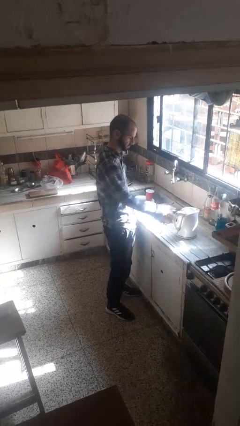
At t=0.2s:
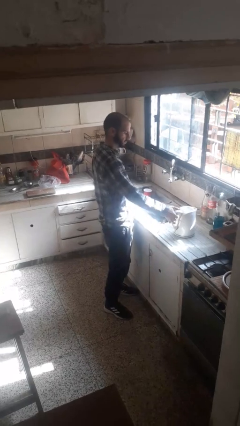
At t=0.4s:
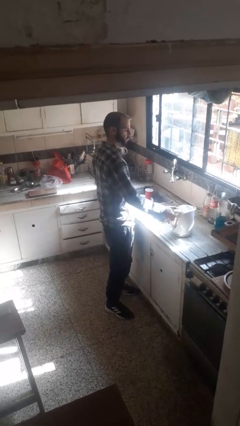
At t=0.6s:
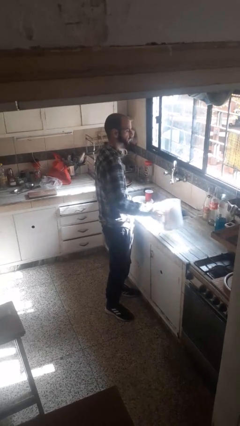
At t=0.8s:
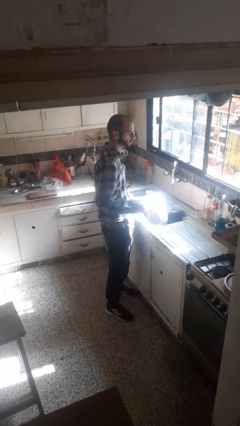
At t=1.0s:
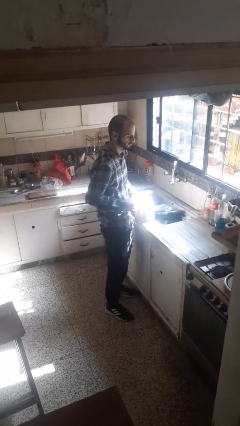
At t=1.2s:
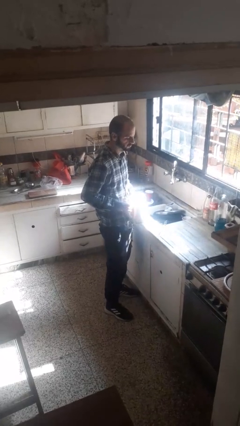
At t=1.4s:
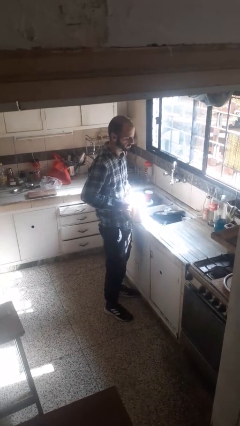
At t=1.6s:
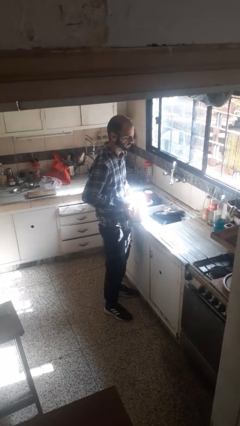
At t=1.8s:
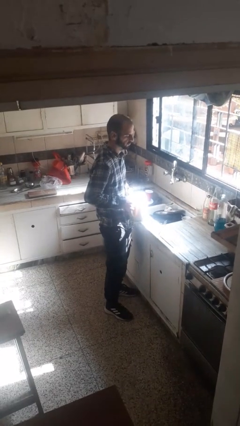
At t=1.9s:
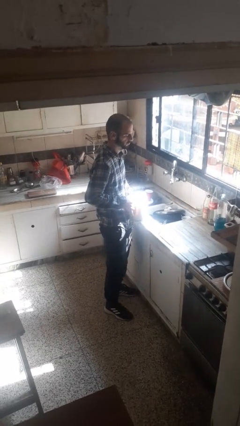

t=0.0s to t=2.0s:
person picks up object from countertop

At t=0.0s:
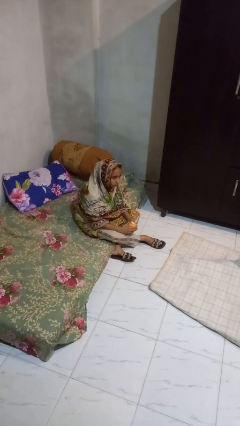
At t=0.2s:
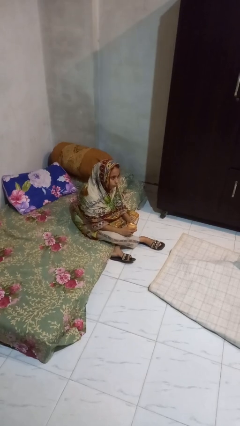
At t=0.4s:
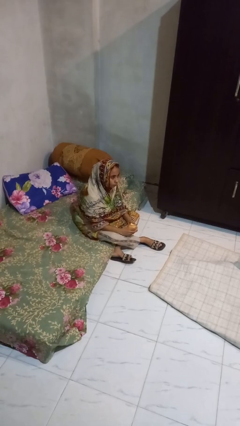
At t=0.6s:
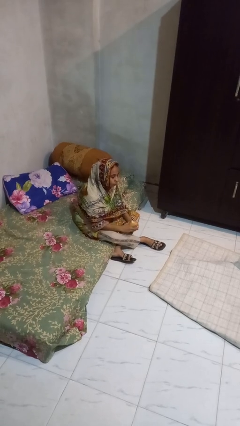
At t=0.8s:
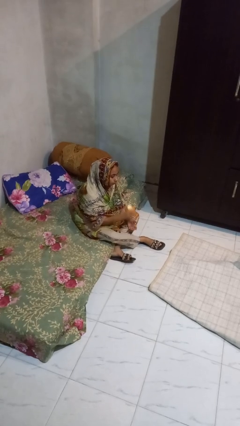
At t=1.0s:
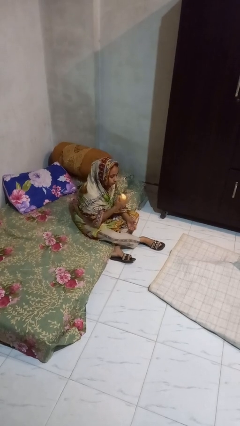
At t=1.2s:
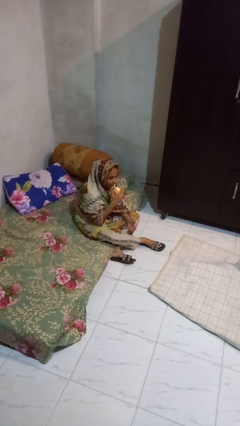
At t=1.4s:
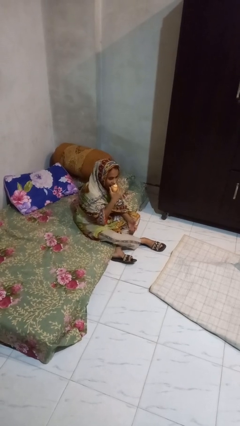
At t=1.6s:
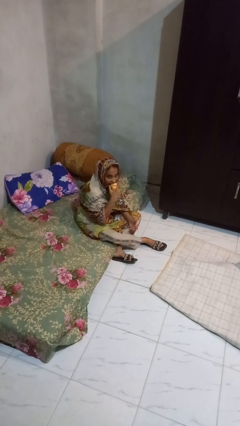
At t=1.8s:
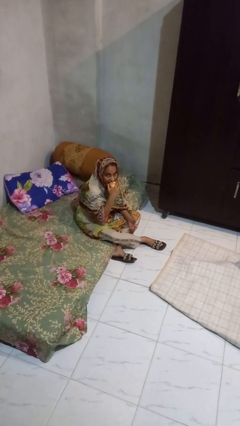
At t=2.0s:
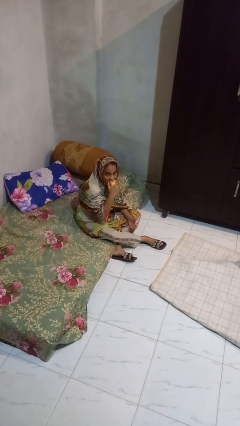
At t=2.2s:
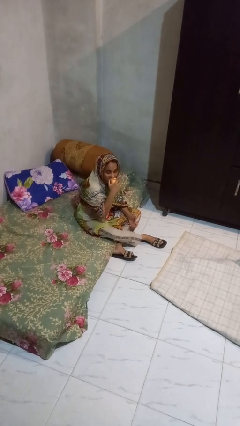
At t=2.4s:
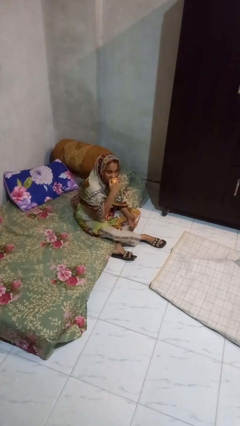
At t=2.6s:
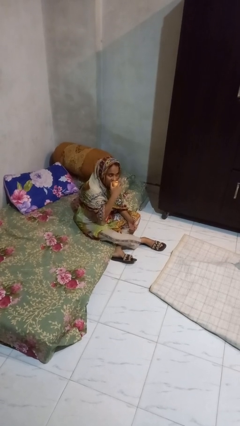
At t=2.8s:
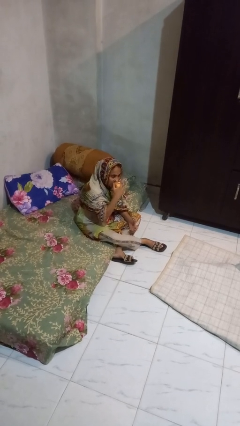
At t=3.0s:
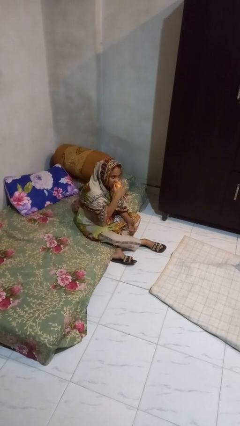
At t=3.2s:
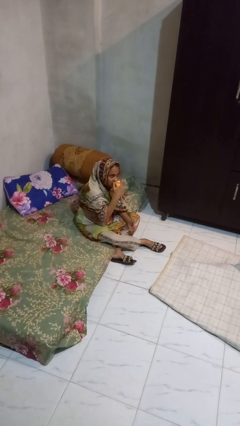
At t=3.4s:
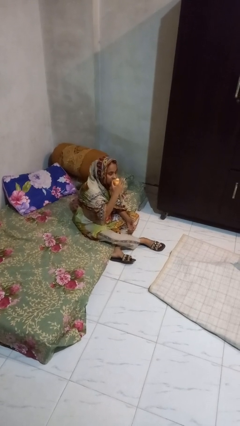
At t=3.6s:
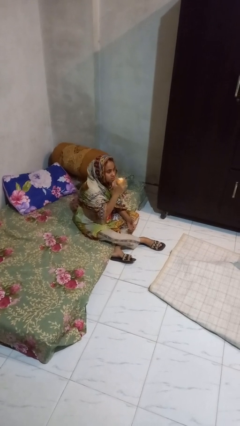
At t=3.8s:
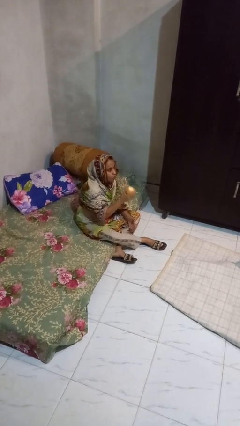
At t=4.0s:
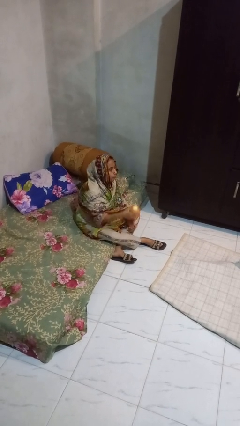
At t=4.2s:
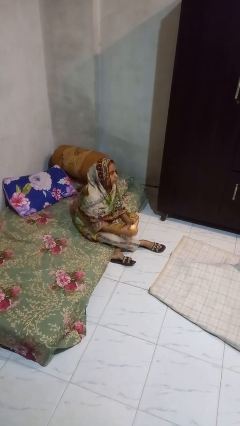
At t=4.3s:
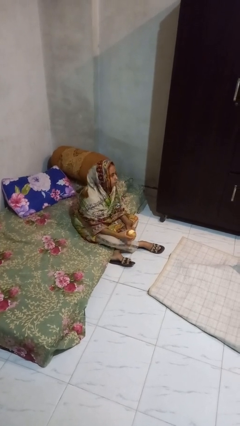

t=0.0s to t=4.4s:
person eats apple

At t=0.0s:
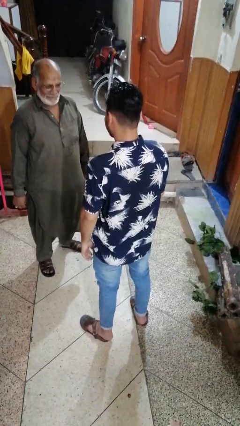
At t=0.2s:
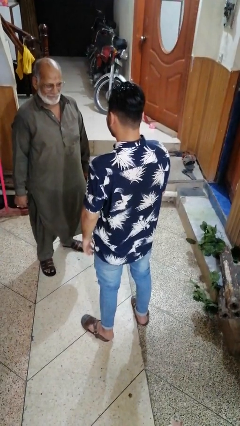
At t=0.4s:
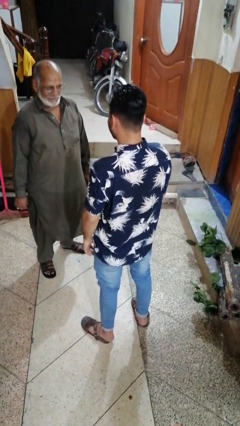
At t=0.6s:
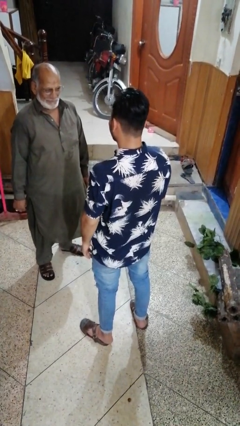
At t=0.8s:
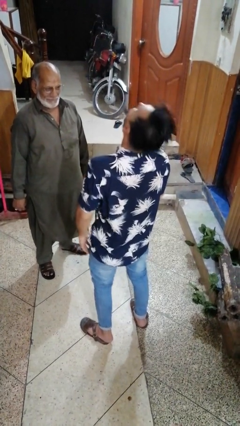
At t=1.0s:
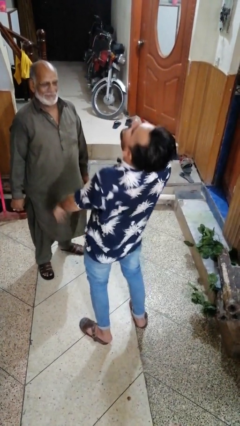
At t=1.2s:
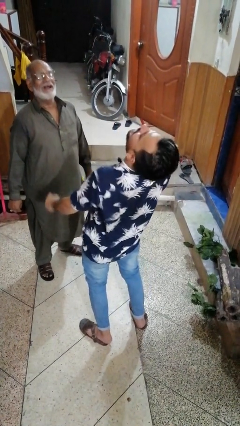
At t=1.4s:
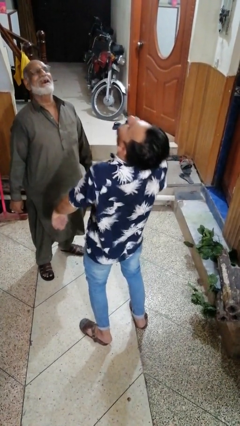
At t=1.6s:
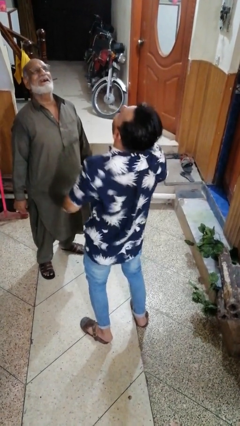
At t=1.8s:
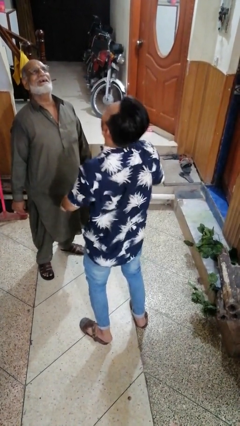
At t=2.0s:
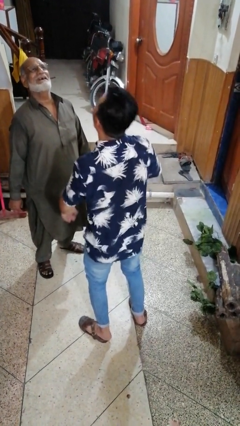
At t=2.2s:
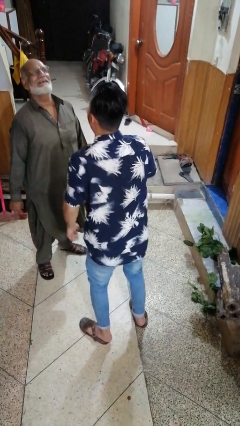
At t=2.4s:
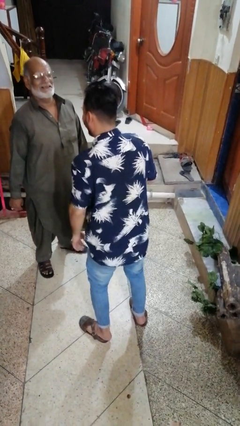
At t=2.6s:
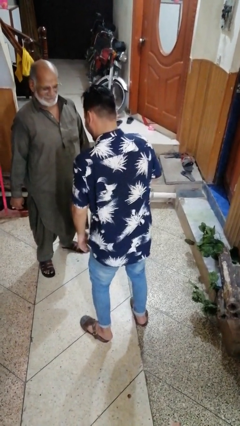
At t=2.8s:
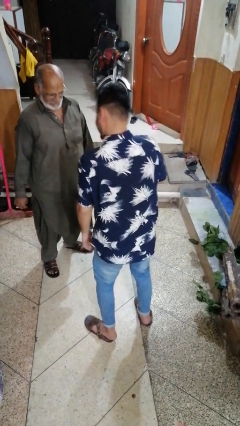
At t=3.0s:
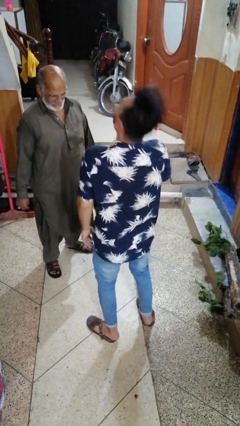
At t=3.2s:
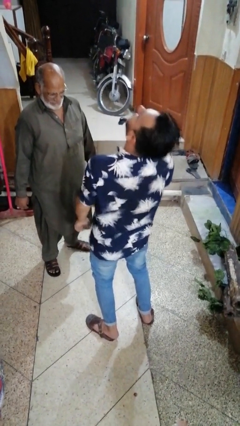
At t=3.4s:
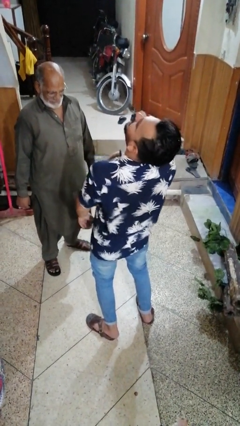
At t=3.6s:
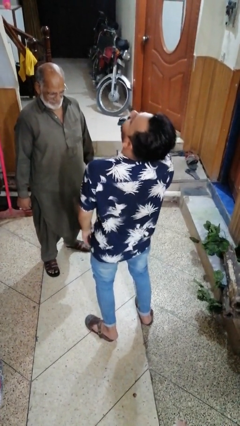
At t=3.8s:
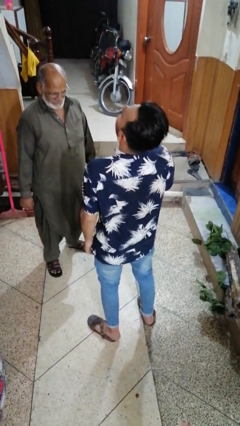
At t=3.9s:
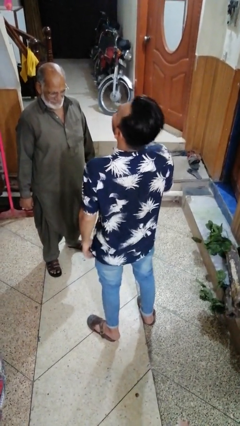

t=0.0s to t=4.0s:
person laughs with person

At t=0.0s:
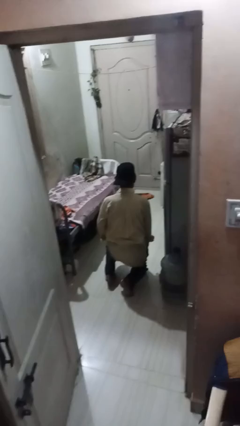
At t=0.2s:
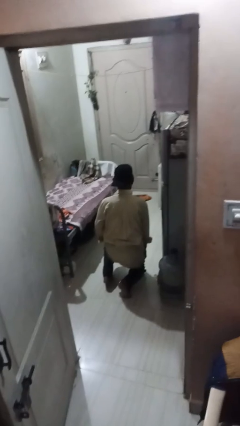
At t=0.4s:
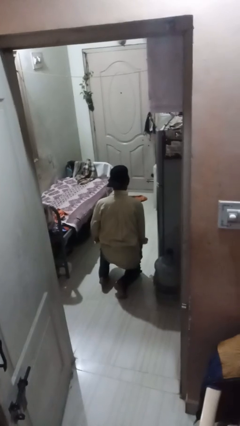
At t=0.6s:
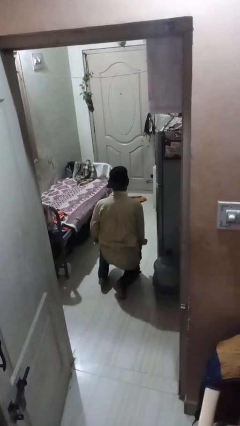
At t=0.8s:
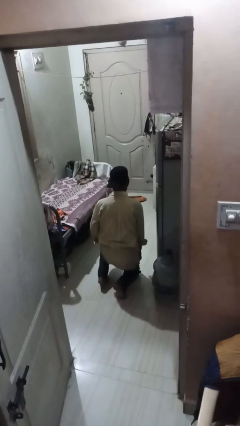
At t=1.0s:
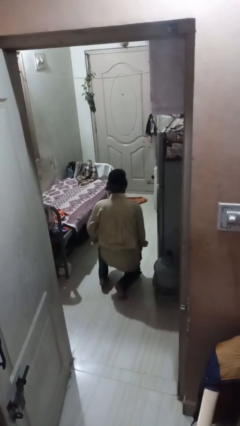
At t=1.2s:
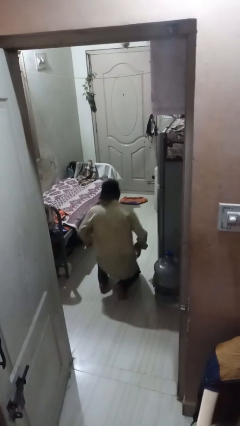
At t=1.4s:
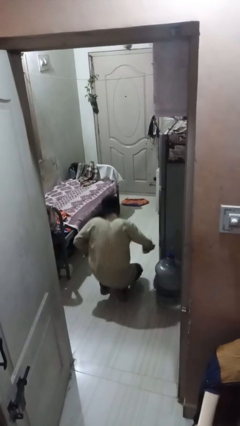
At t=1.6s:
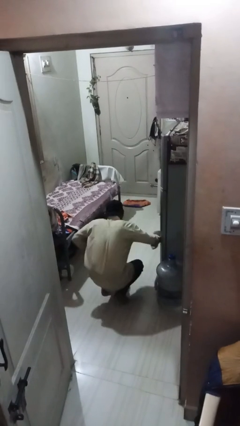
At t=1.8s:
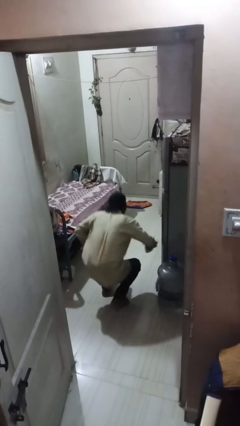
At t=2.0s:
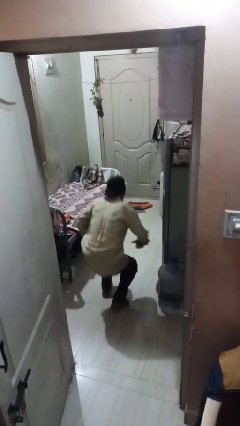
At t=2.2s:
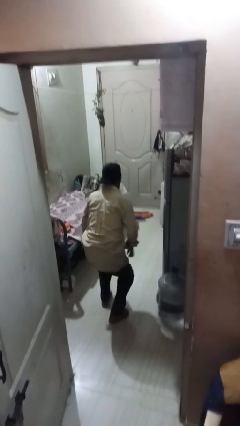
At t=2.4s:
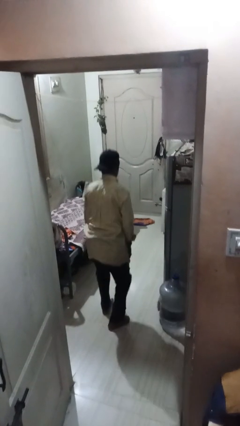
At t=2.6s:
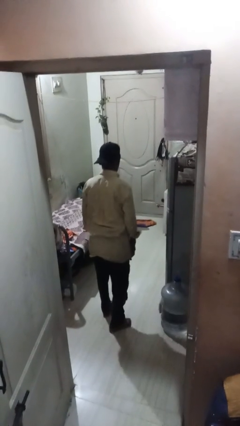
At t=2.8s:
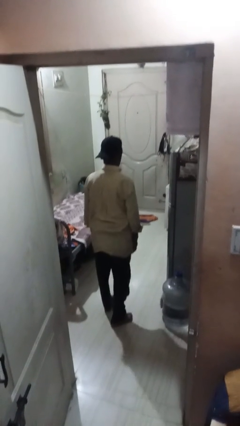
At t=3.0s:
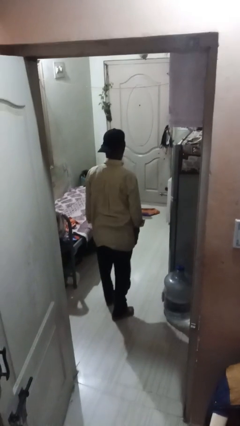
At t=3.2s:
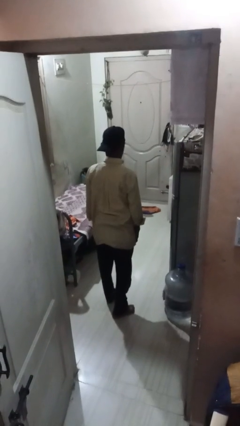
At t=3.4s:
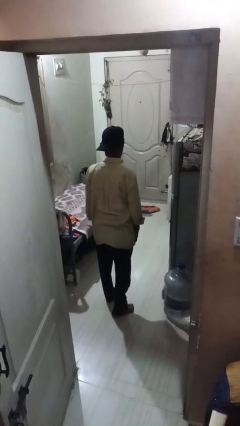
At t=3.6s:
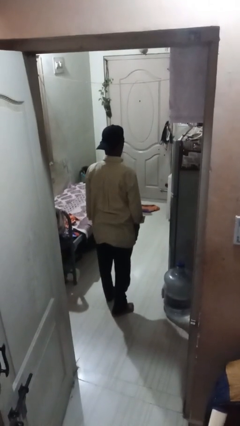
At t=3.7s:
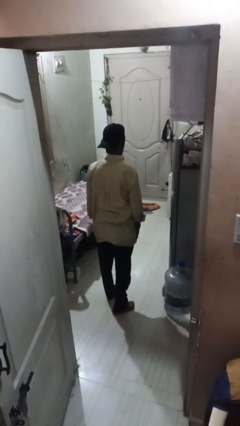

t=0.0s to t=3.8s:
person stands up from floor

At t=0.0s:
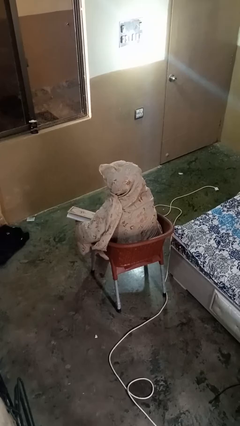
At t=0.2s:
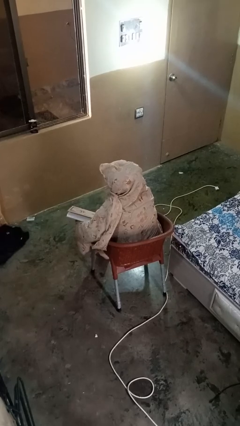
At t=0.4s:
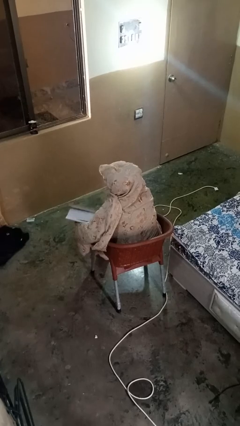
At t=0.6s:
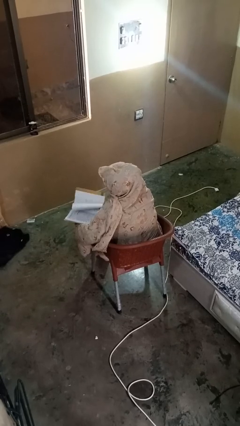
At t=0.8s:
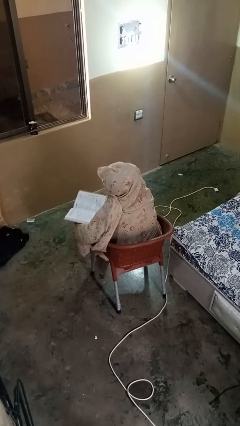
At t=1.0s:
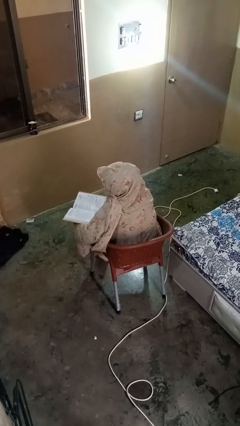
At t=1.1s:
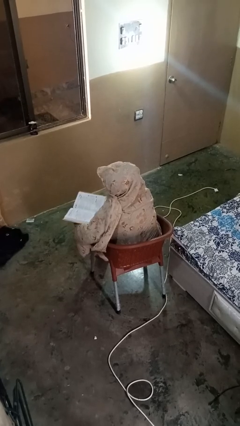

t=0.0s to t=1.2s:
person reads book

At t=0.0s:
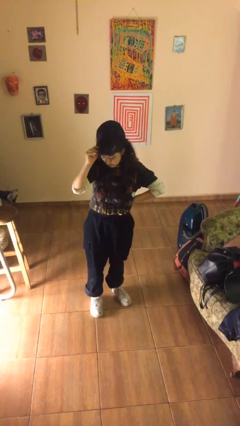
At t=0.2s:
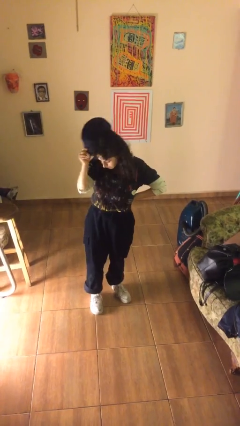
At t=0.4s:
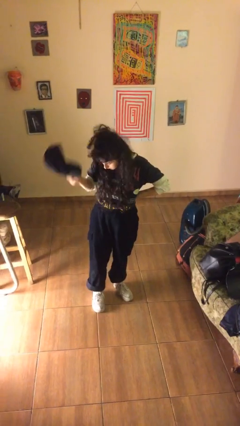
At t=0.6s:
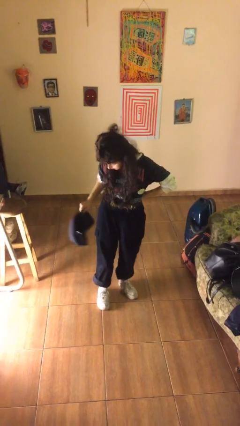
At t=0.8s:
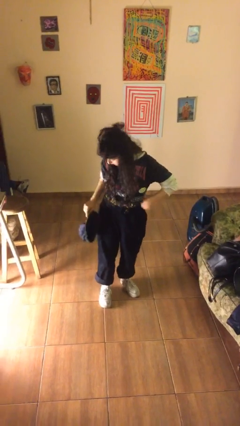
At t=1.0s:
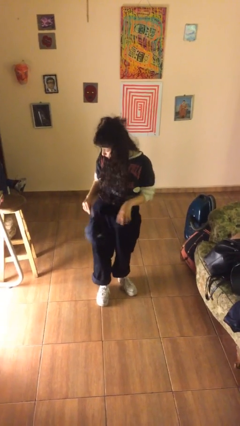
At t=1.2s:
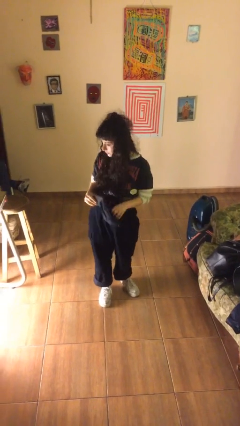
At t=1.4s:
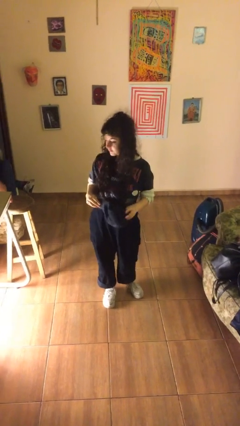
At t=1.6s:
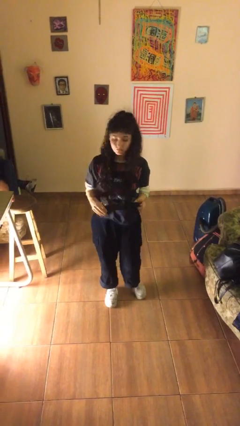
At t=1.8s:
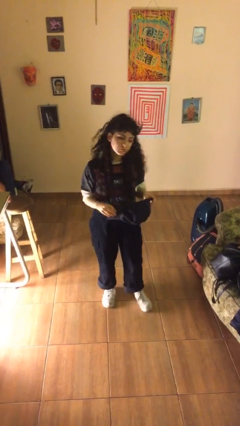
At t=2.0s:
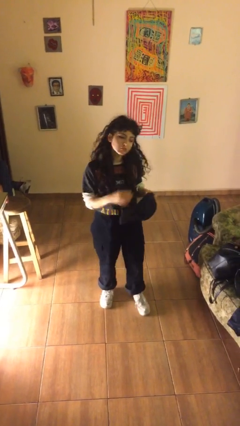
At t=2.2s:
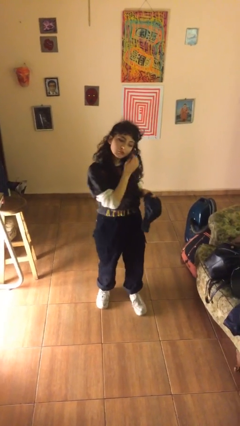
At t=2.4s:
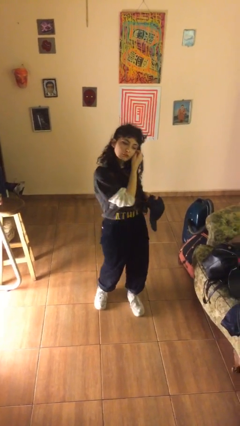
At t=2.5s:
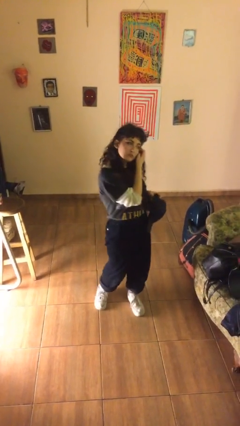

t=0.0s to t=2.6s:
person takes off hat
